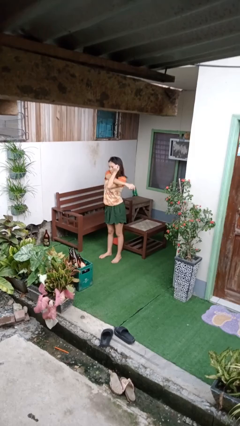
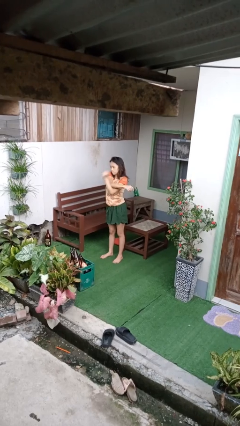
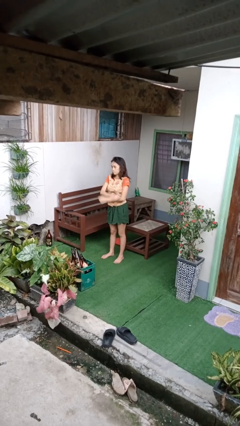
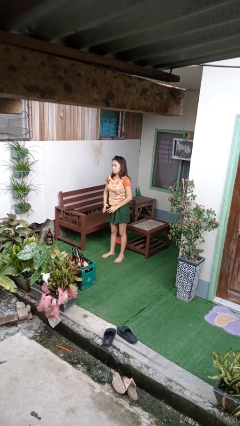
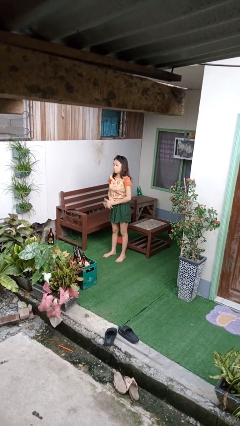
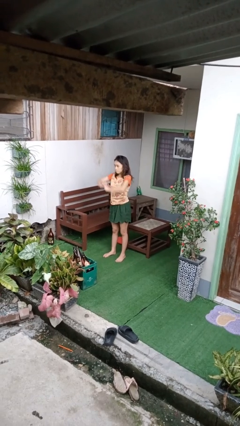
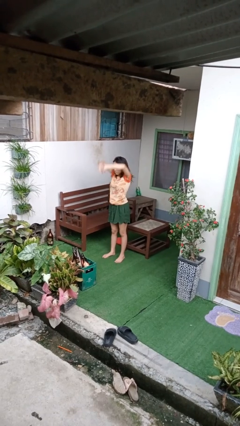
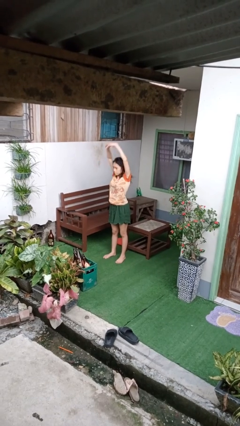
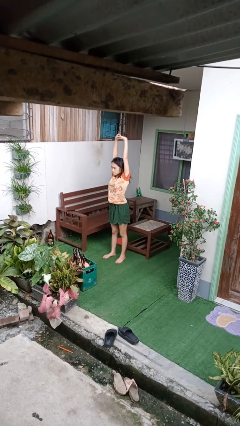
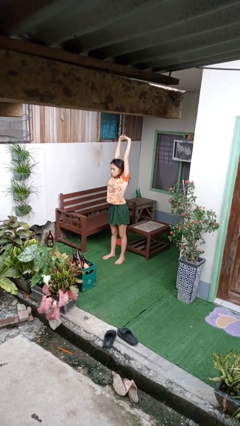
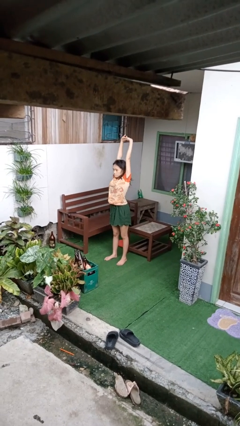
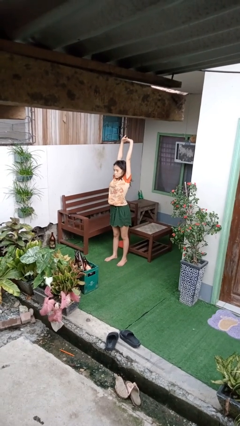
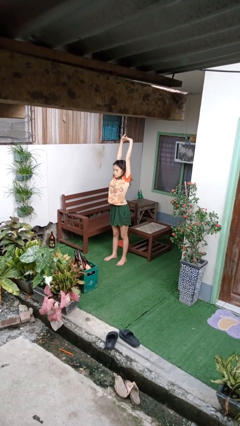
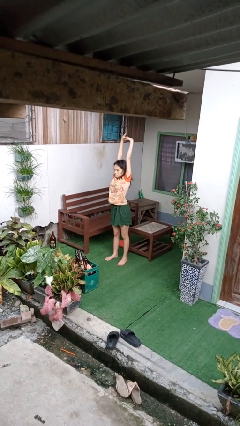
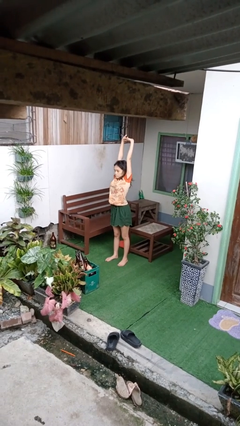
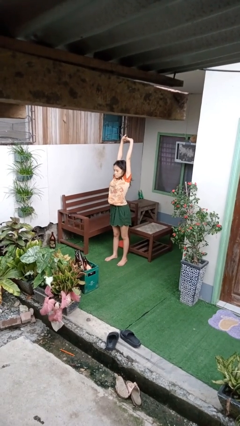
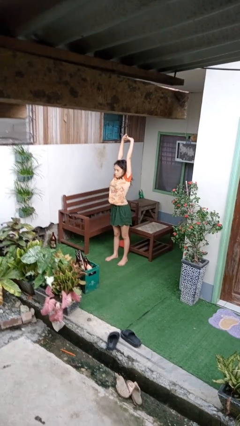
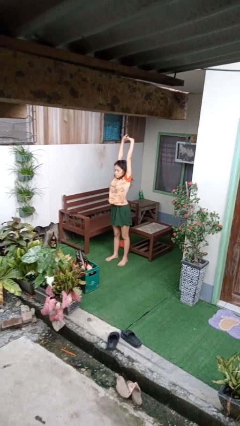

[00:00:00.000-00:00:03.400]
person stretches arms over head

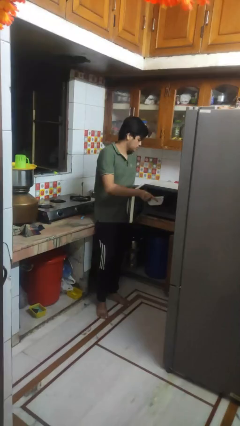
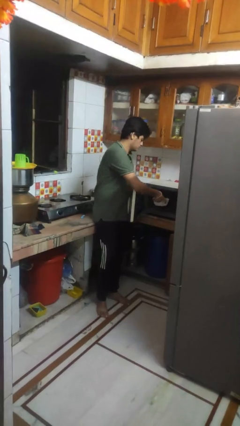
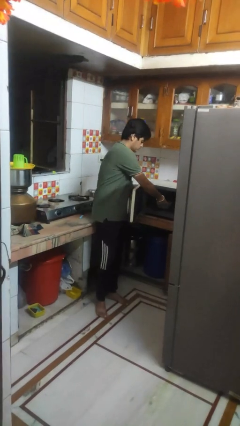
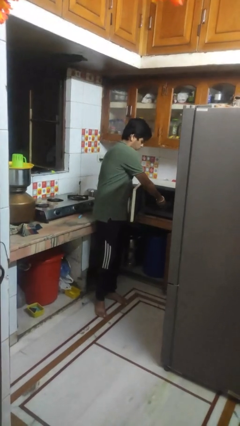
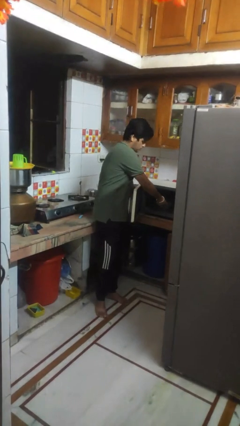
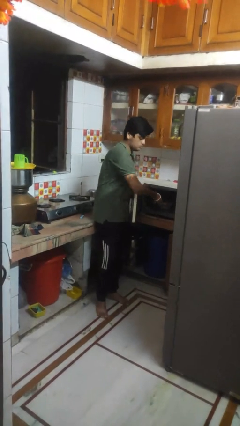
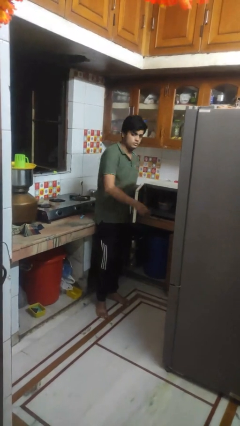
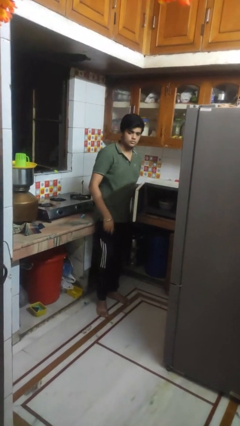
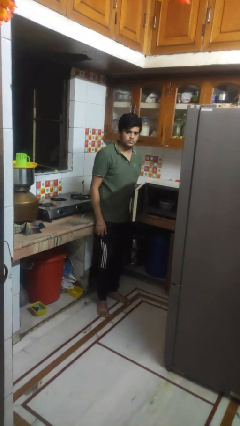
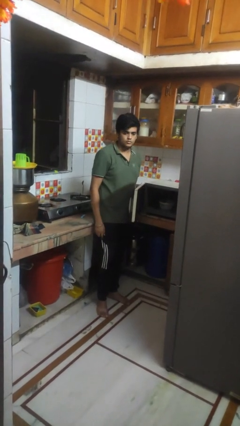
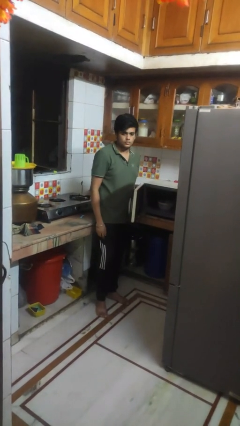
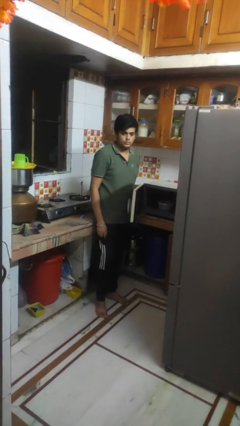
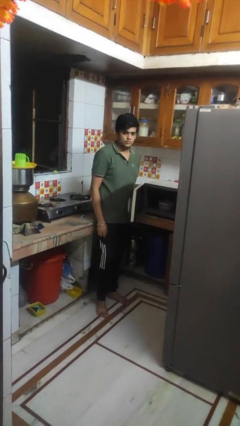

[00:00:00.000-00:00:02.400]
person puts object into microwave

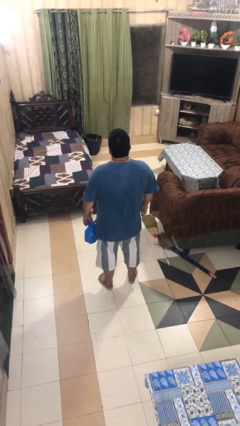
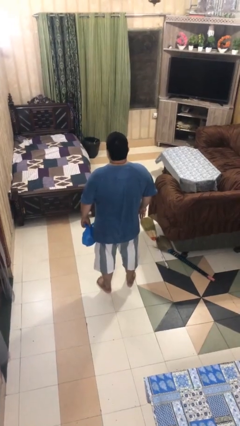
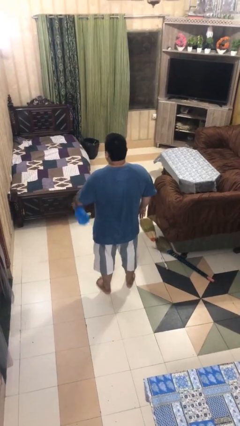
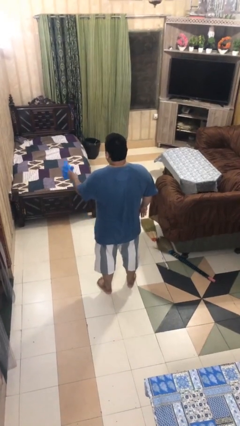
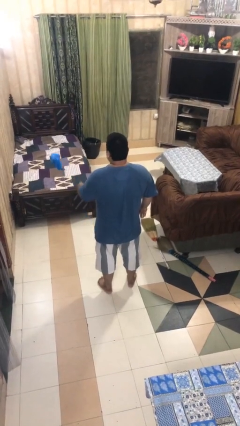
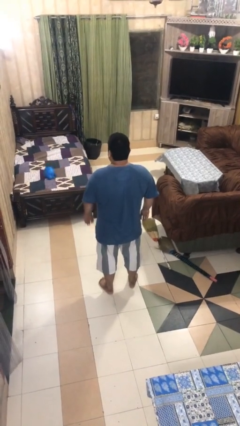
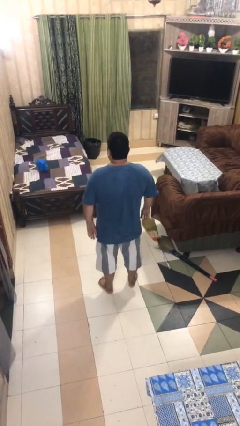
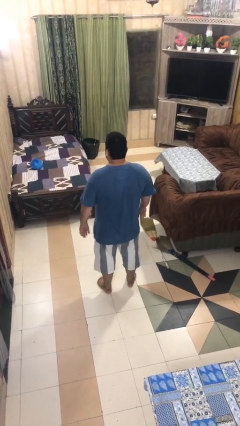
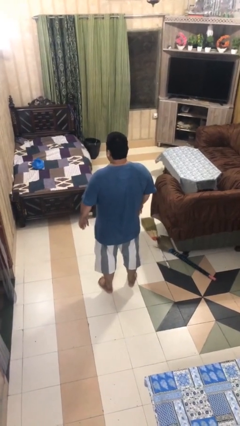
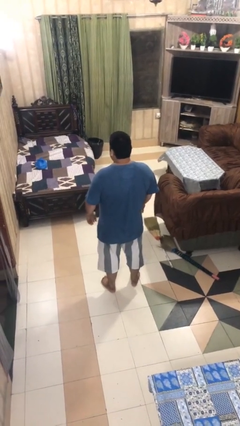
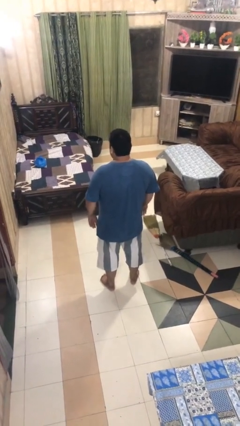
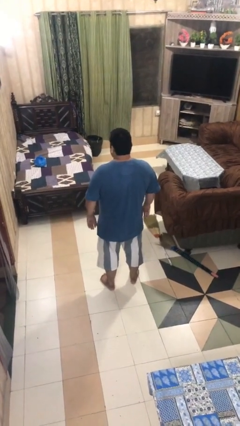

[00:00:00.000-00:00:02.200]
person throws object on bed

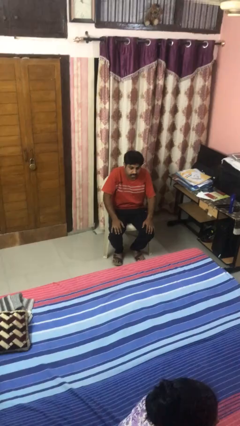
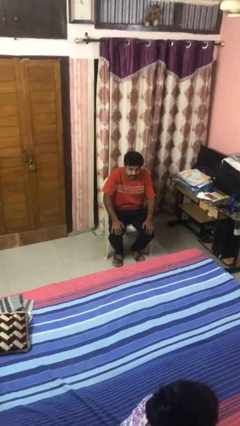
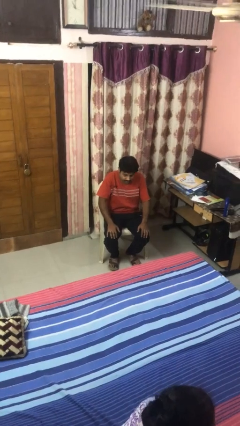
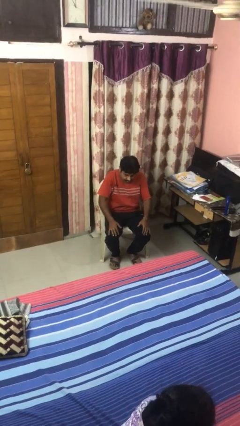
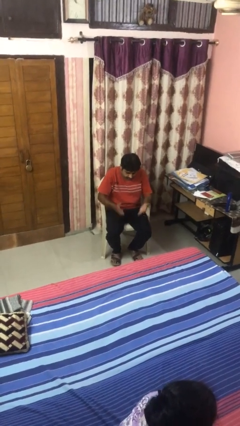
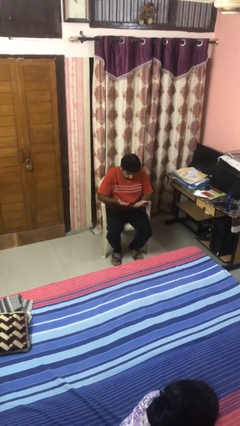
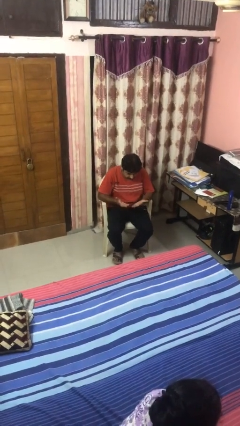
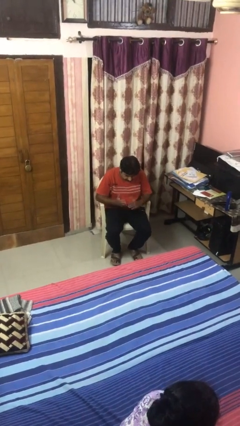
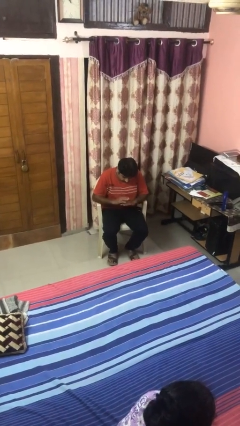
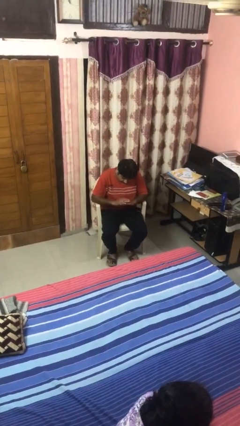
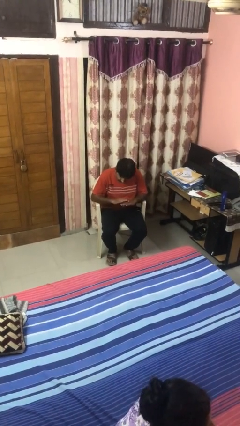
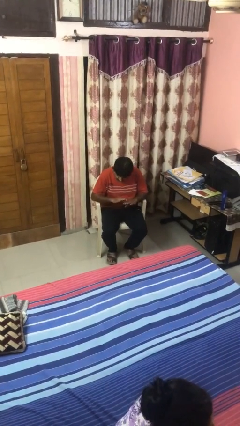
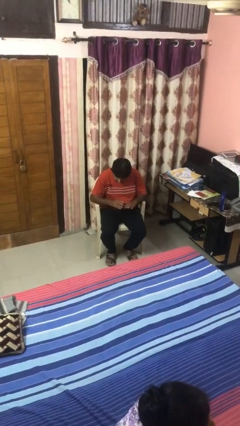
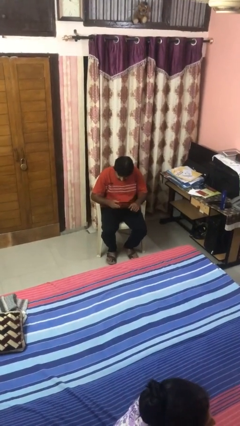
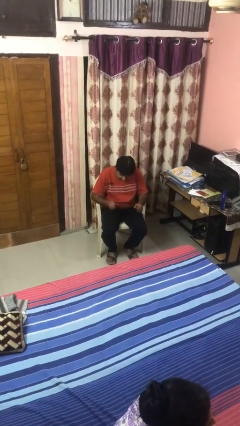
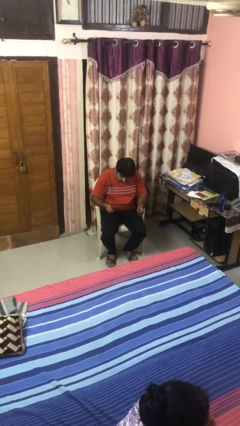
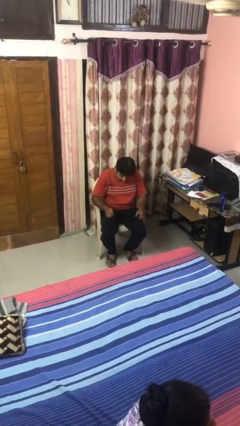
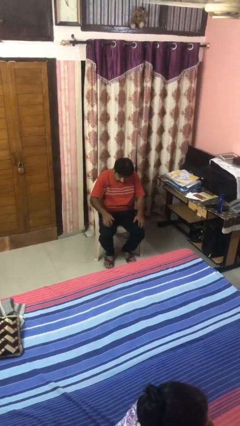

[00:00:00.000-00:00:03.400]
person looks at hands in lap

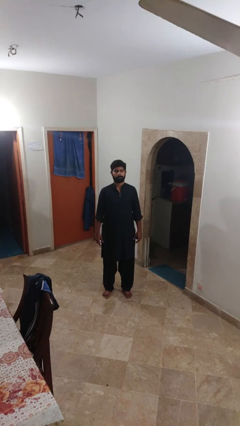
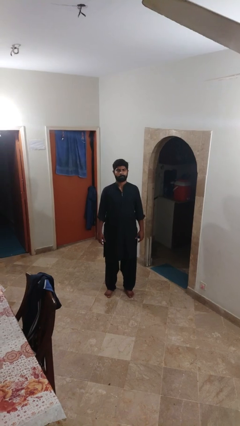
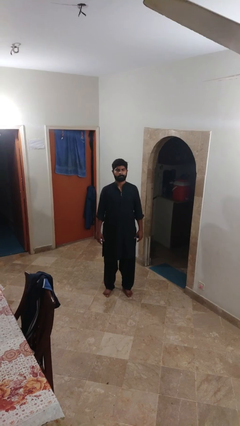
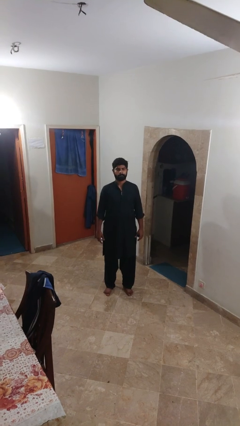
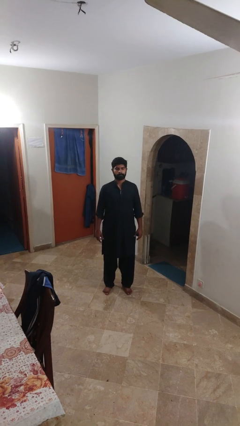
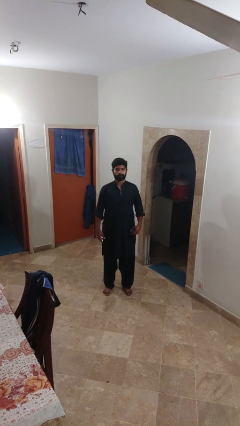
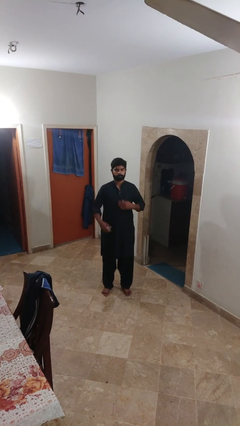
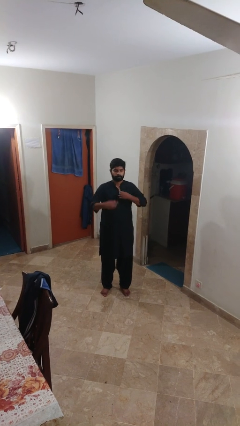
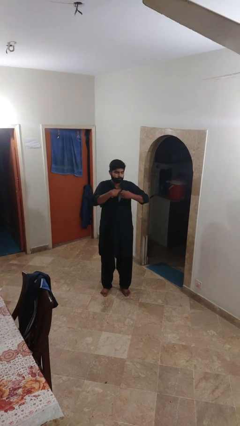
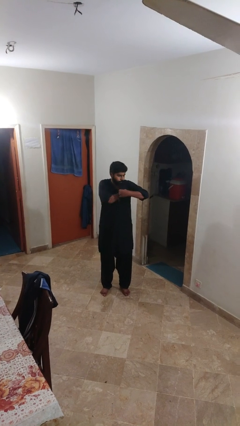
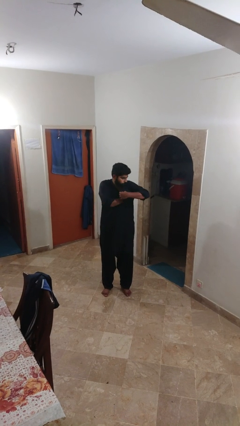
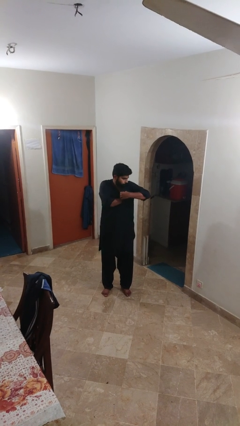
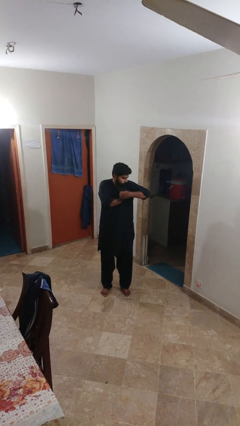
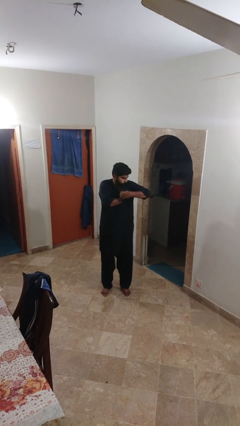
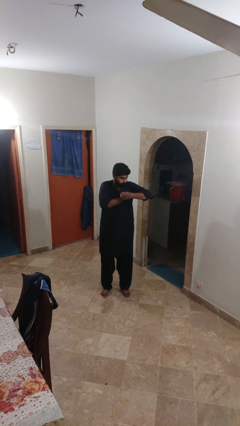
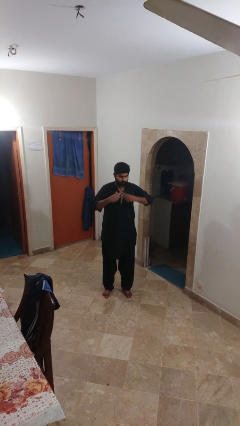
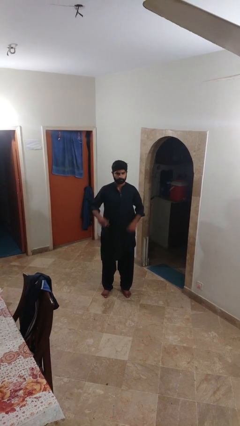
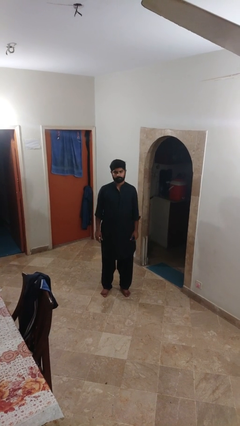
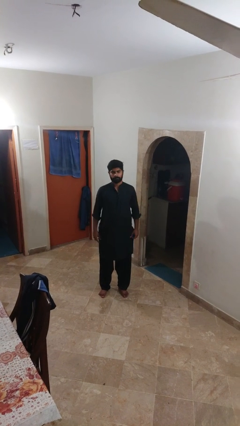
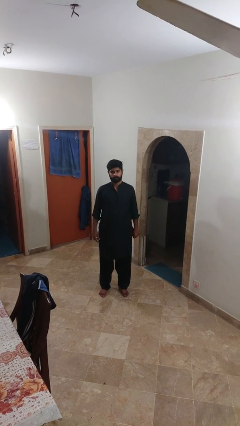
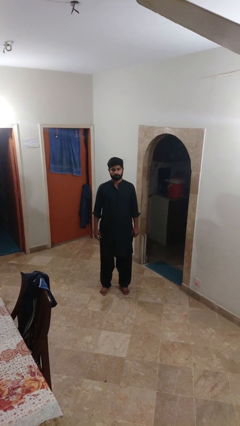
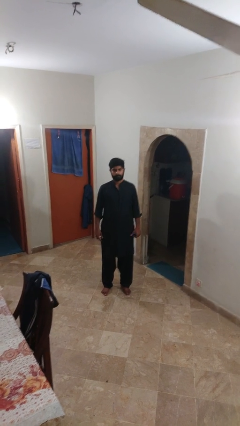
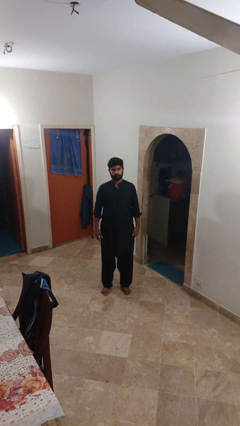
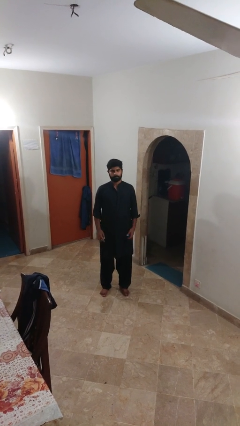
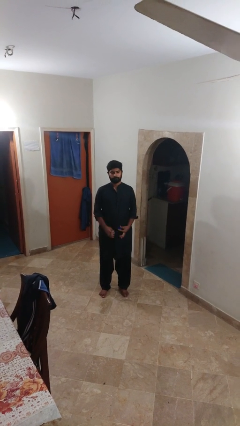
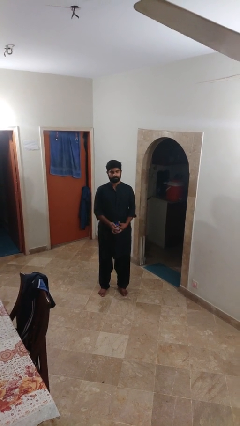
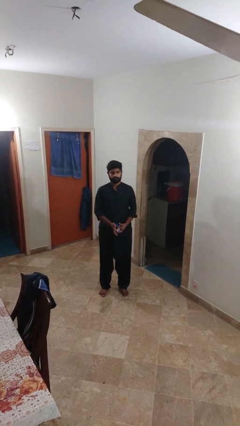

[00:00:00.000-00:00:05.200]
person applies deodorant

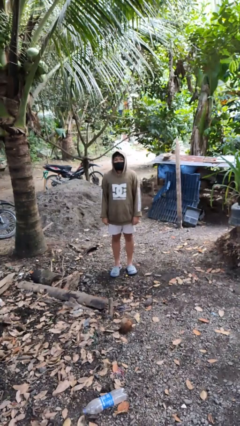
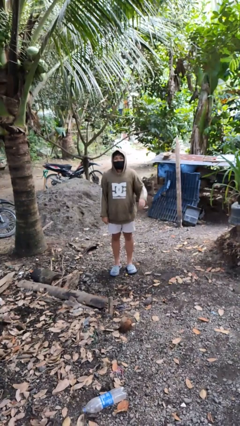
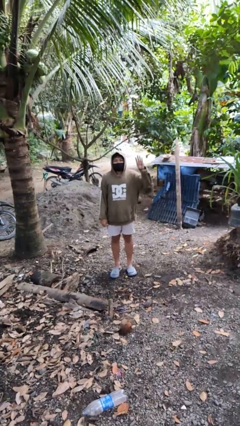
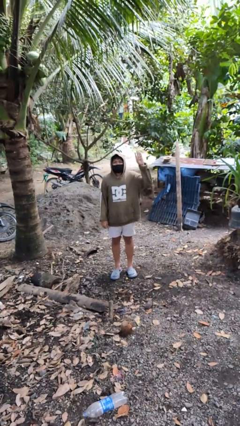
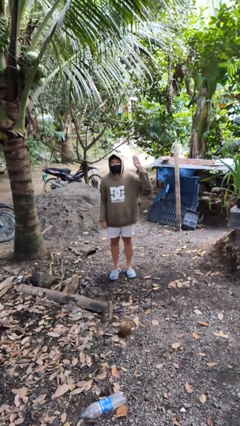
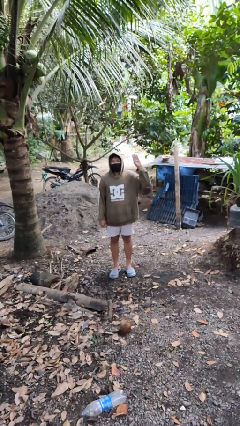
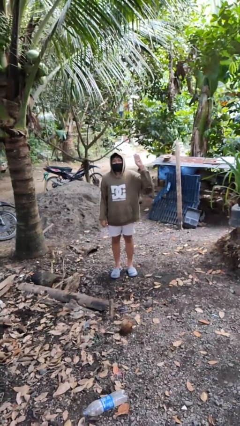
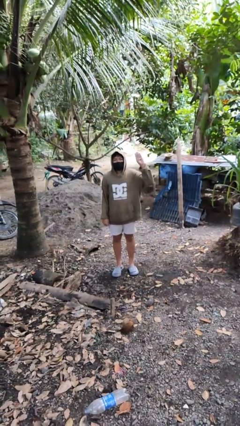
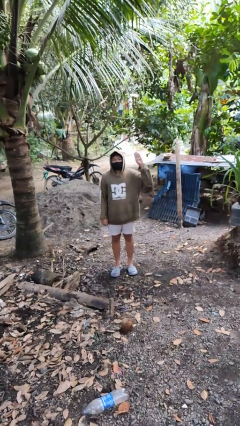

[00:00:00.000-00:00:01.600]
person gestures number four
